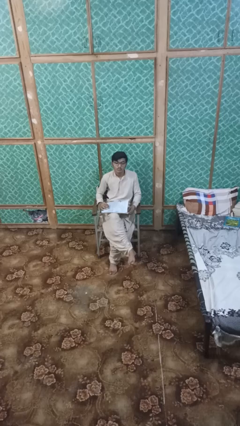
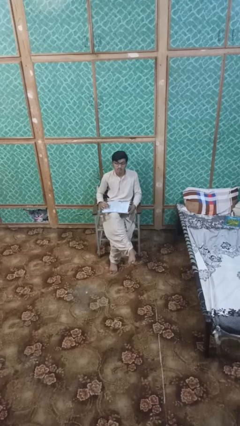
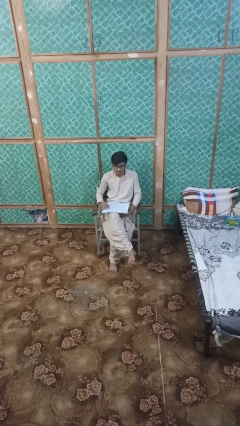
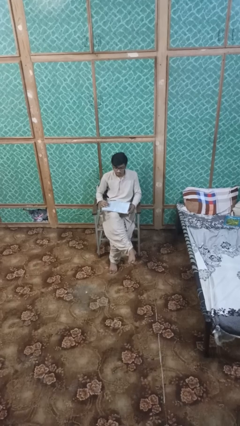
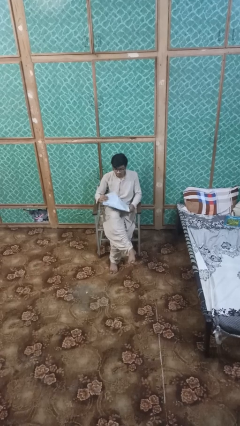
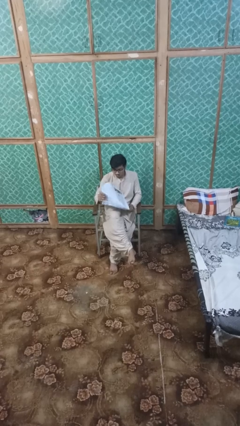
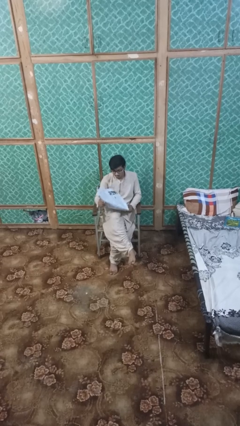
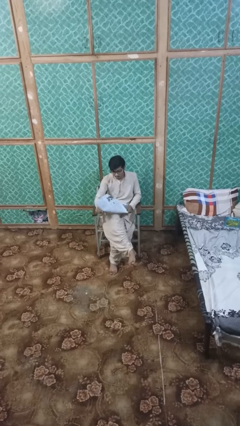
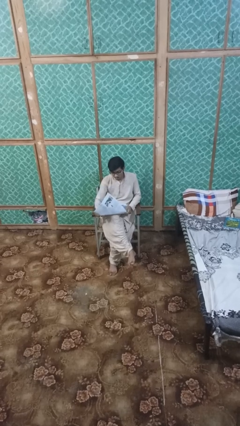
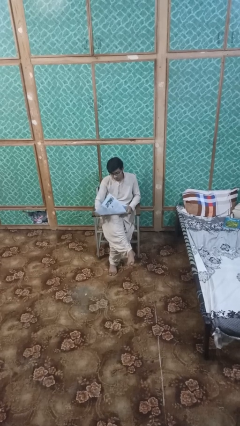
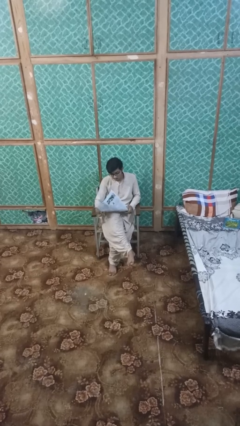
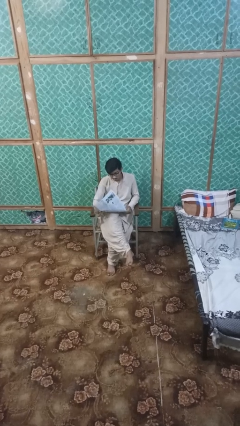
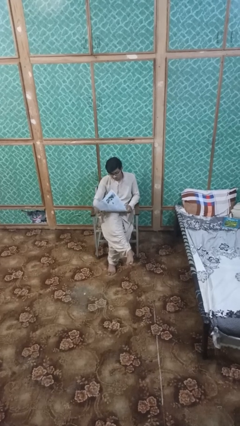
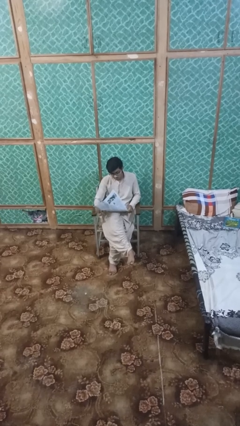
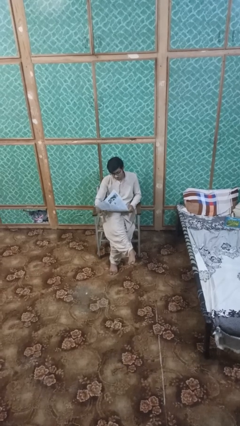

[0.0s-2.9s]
person reads newspaper

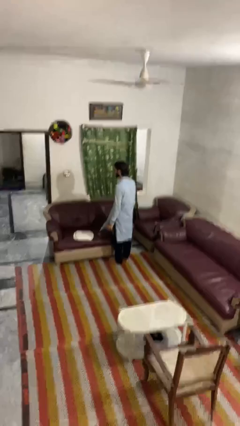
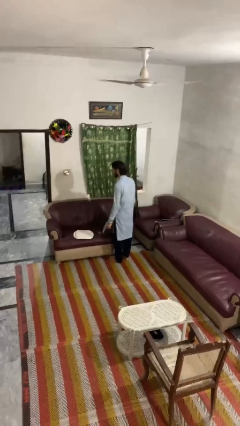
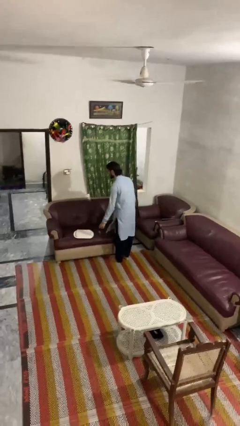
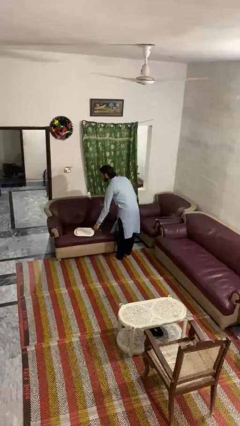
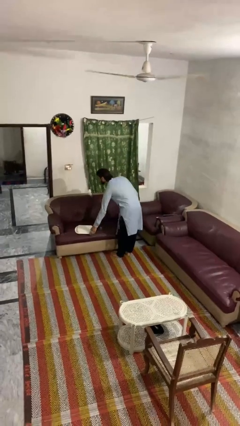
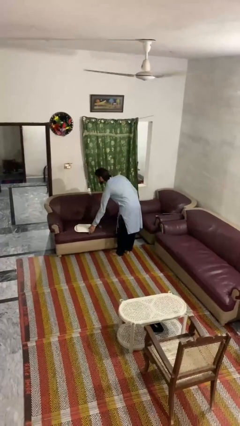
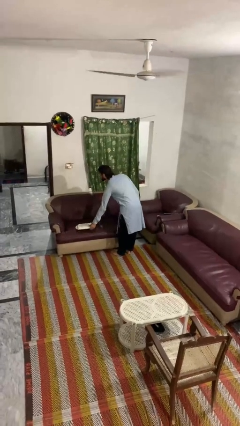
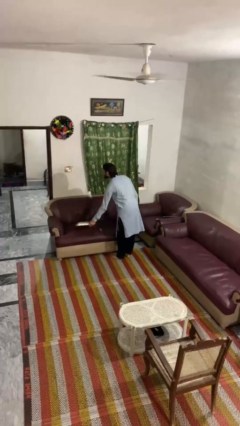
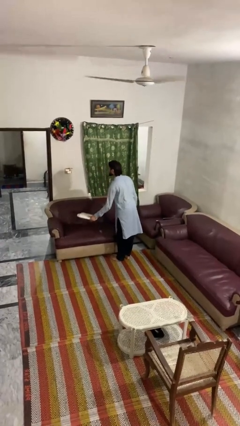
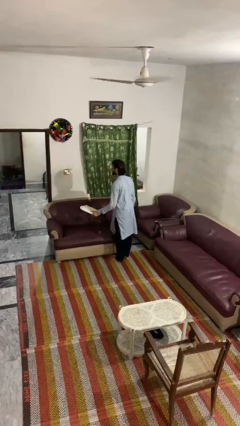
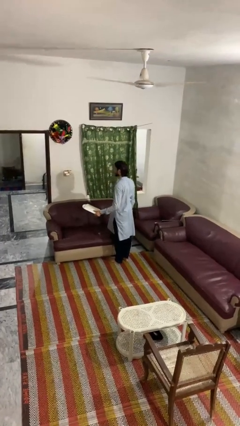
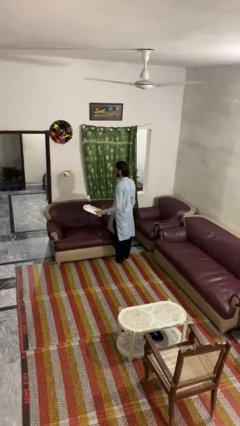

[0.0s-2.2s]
person picks up object from couch

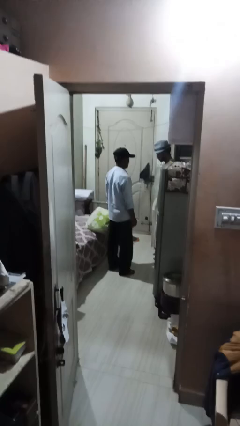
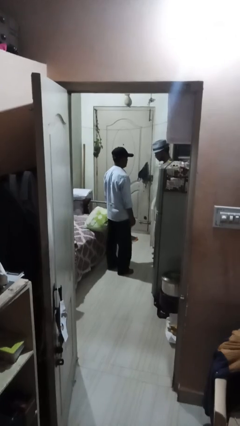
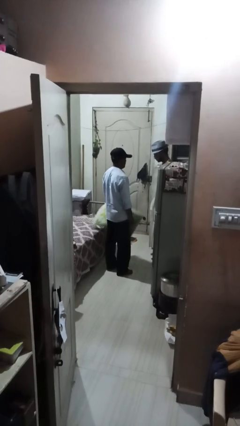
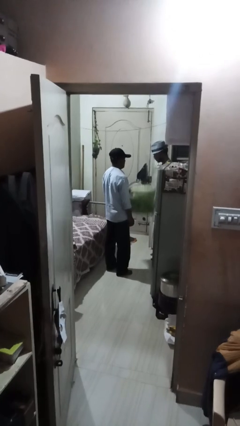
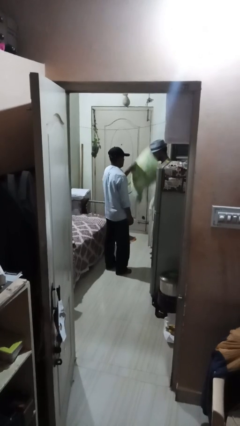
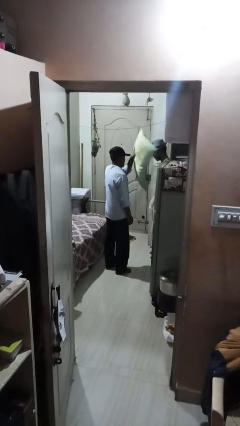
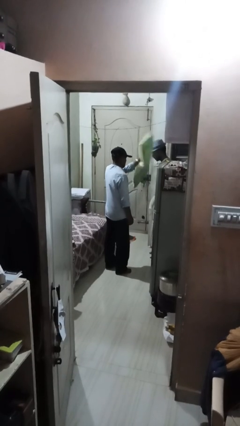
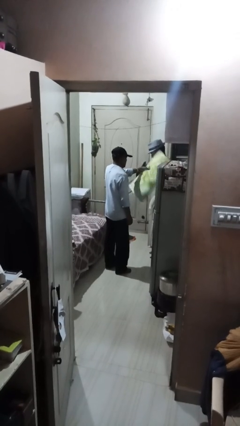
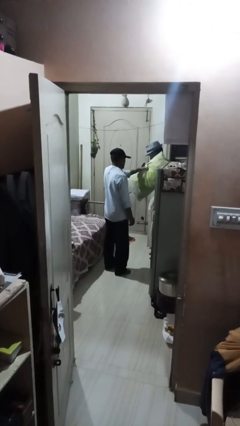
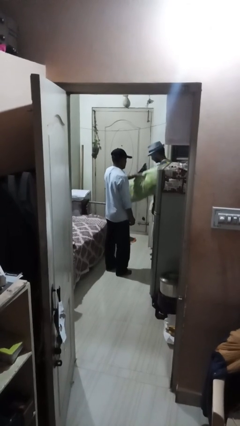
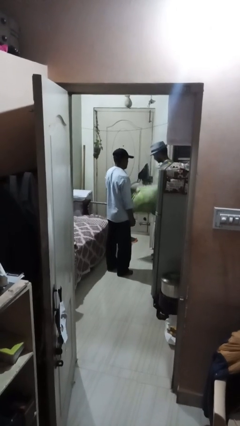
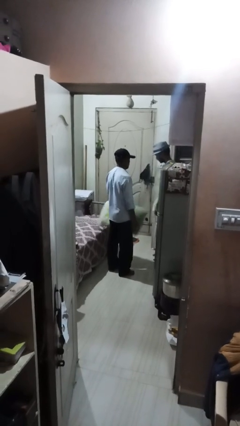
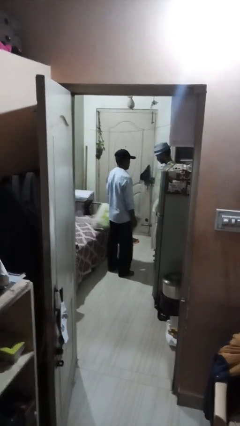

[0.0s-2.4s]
person hits person with pillow

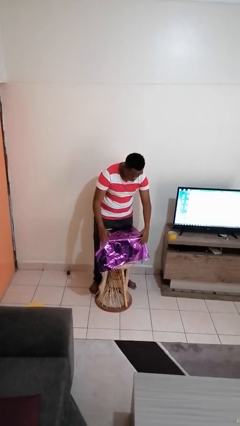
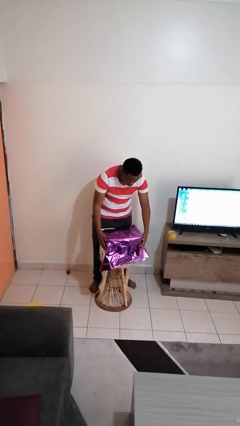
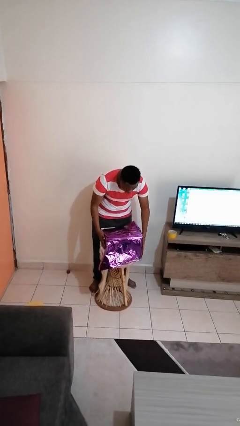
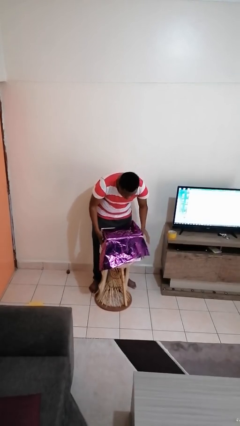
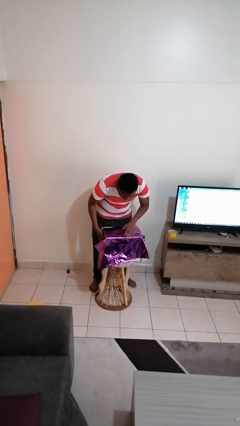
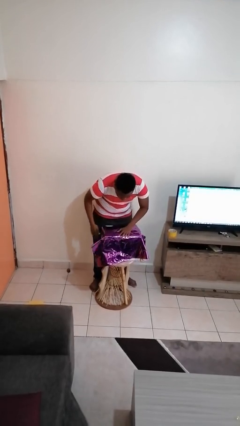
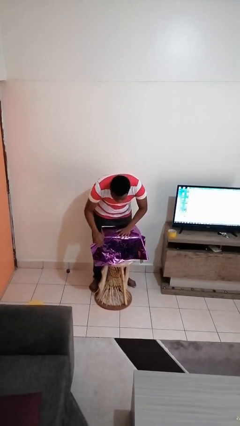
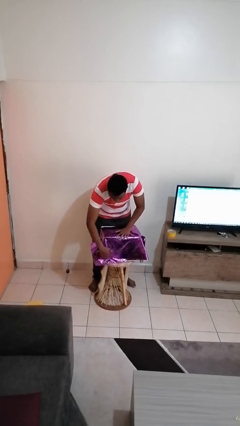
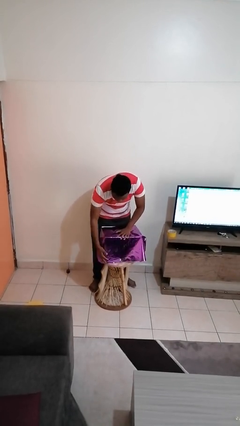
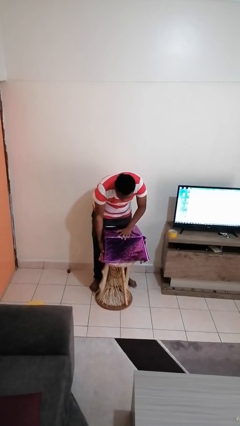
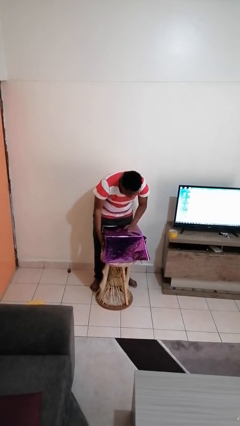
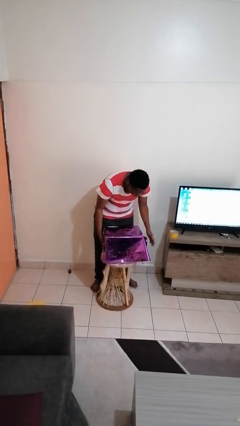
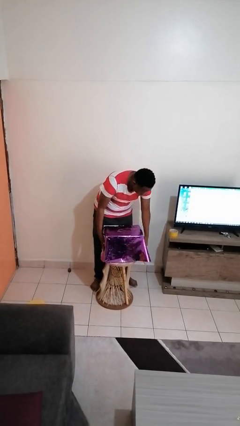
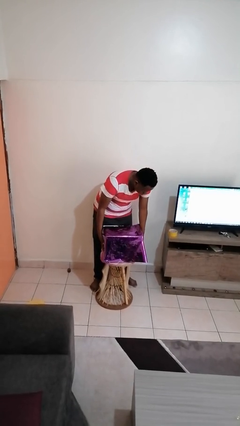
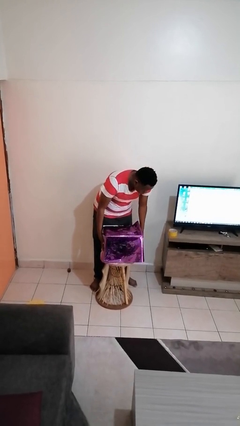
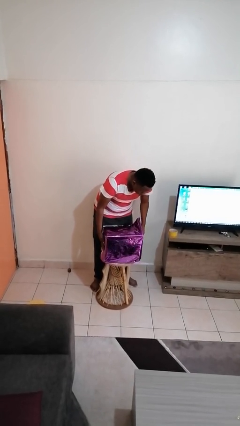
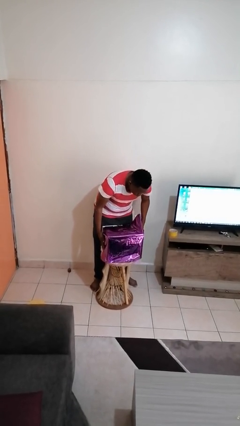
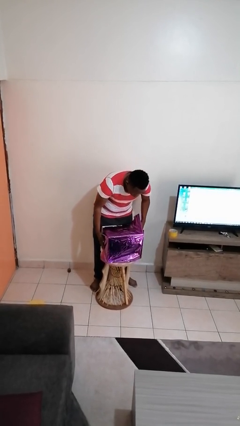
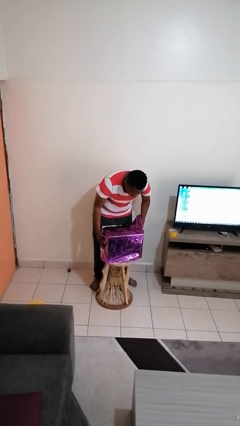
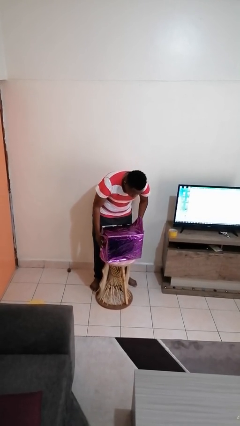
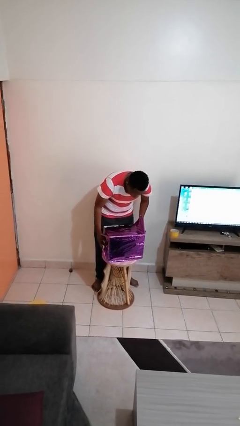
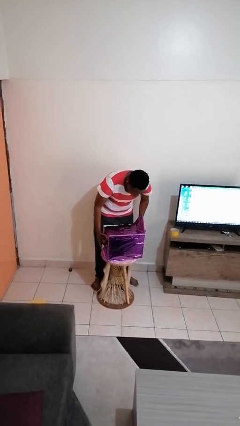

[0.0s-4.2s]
person wraps box

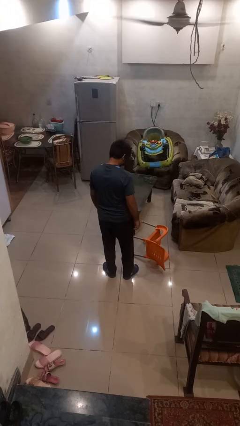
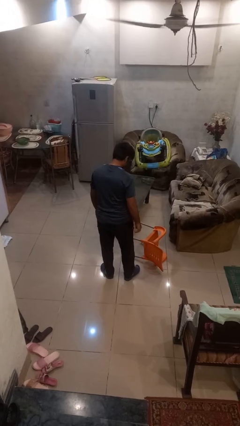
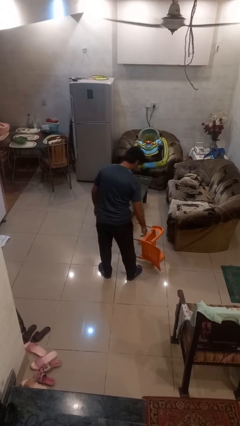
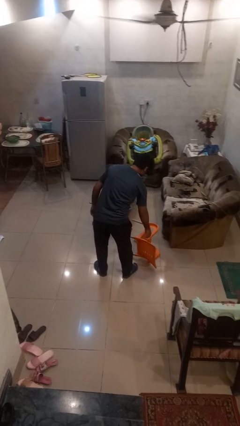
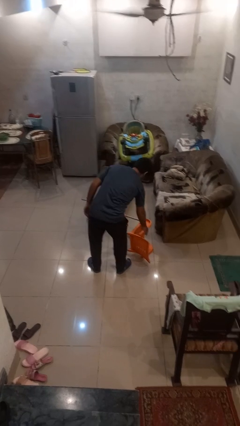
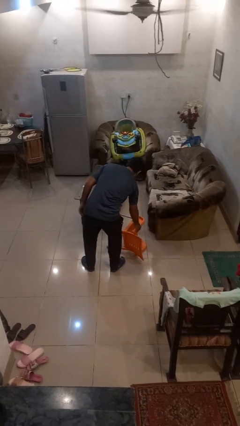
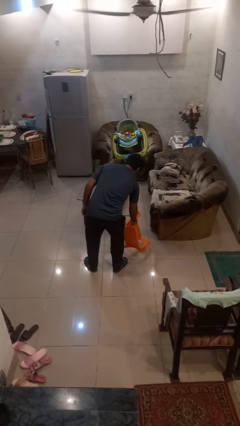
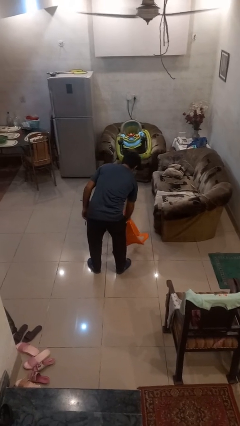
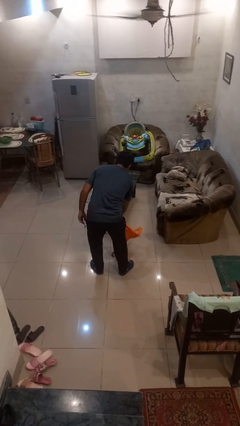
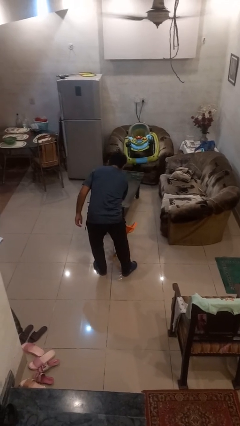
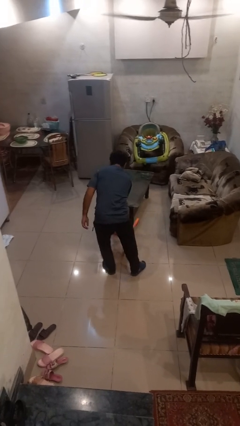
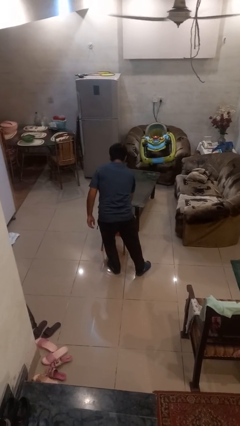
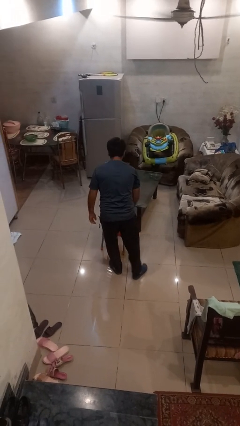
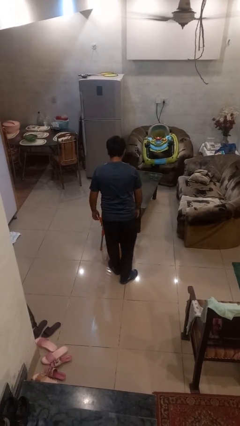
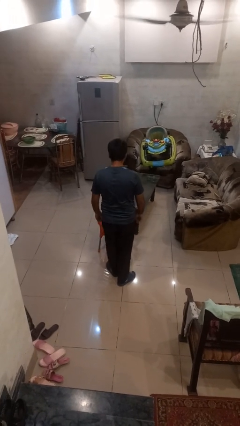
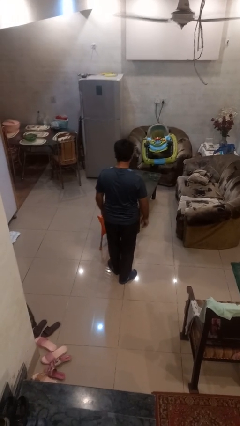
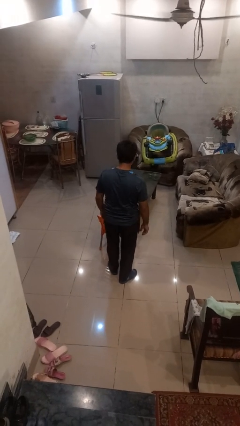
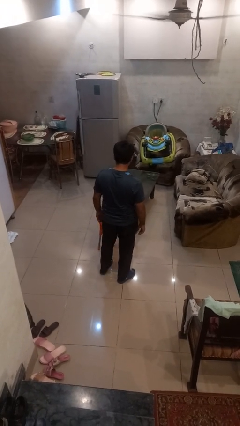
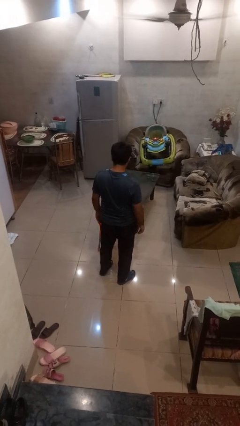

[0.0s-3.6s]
person sets upright furniture

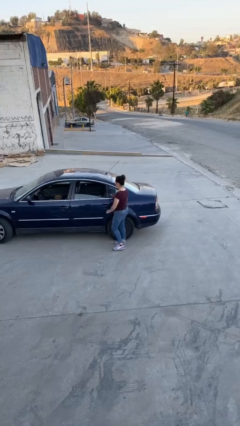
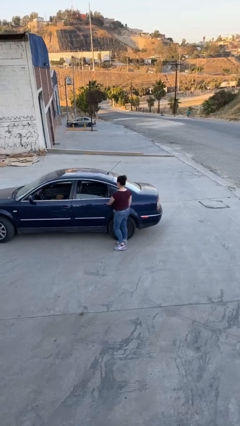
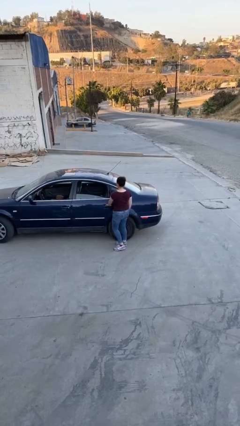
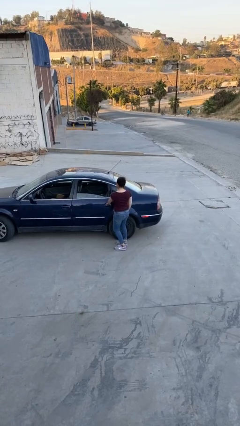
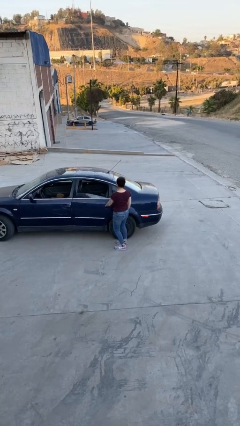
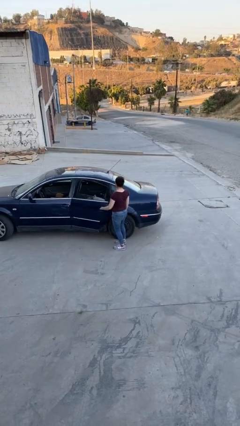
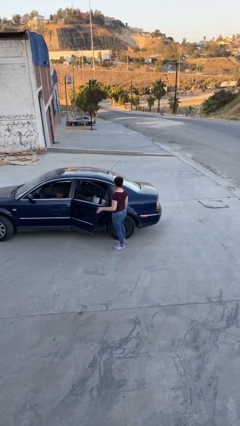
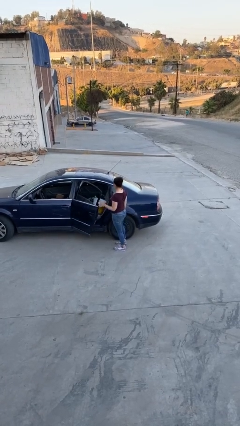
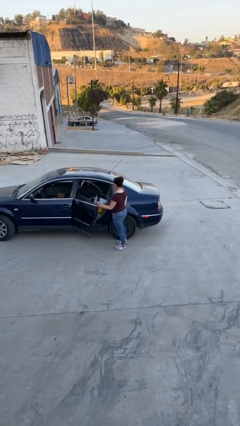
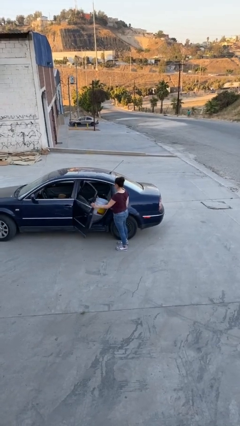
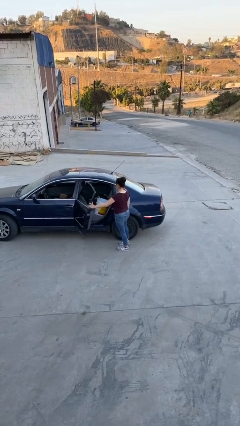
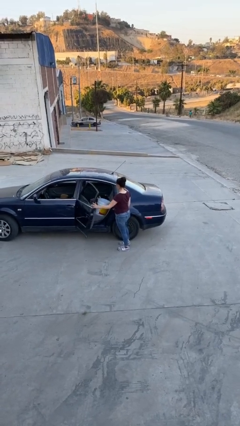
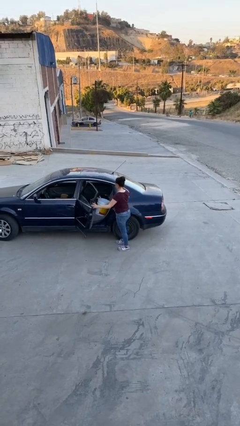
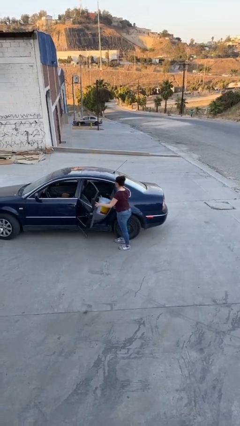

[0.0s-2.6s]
person opens car door
